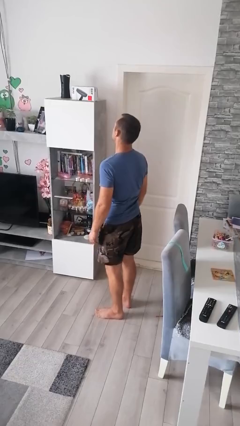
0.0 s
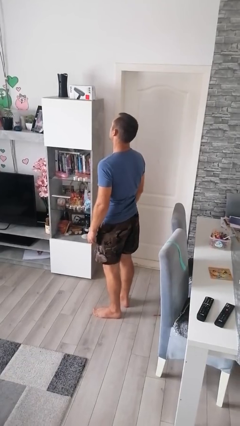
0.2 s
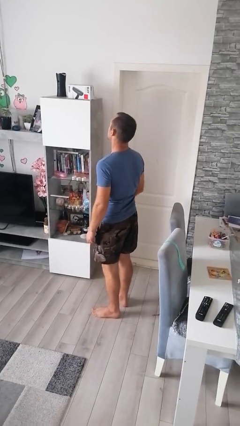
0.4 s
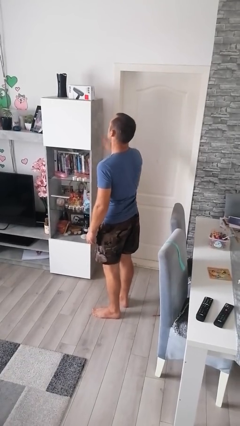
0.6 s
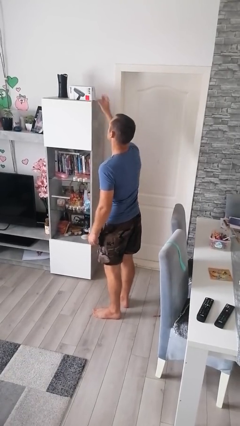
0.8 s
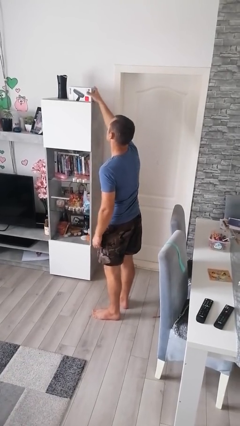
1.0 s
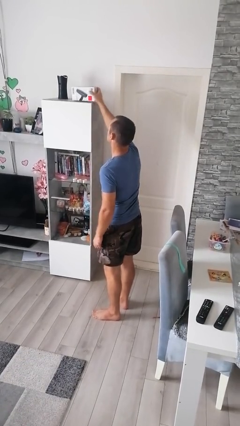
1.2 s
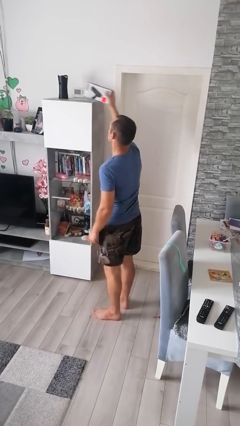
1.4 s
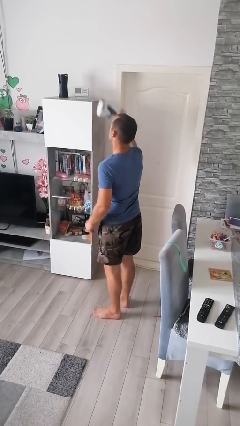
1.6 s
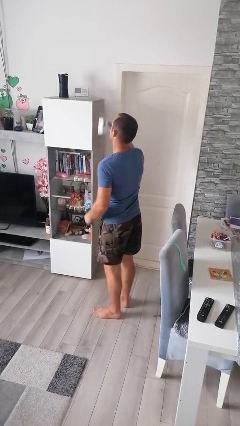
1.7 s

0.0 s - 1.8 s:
person puts down object on shelf

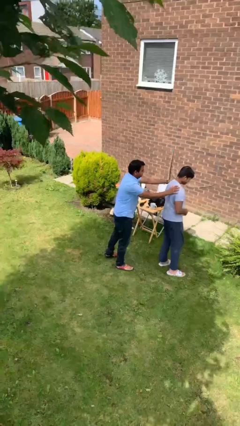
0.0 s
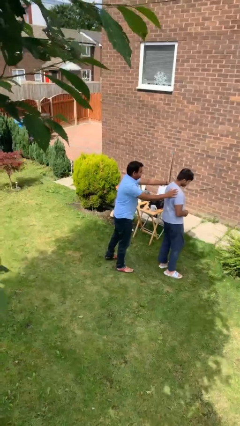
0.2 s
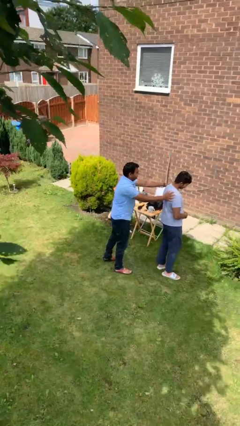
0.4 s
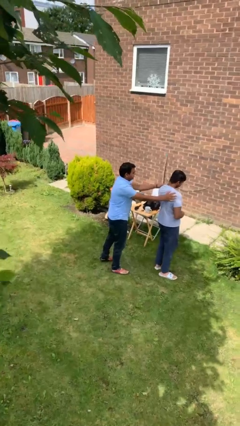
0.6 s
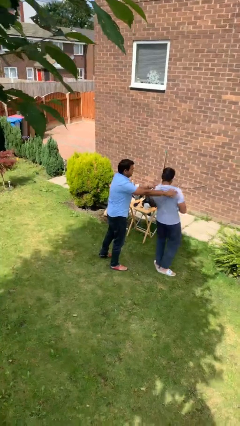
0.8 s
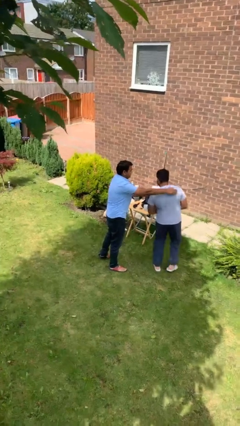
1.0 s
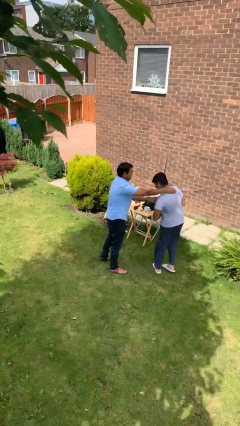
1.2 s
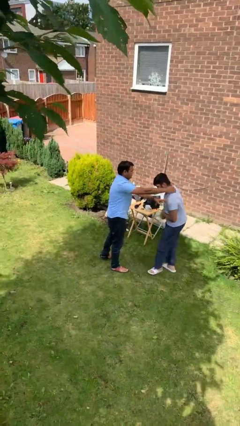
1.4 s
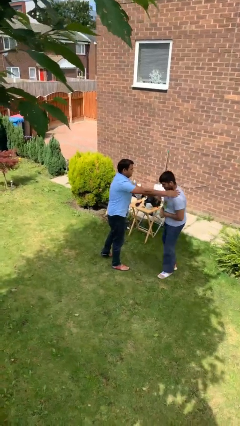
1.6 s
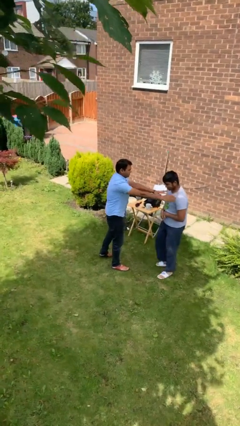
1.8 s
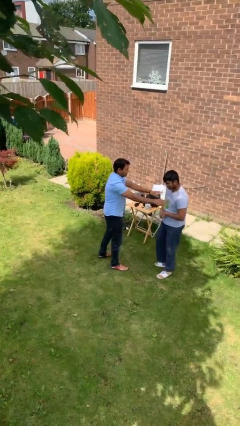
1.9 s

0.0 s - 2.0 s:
person spins person around

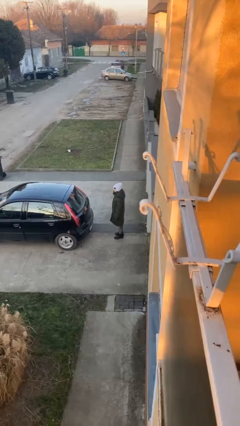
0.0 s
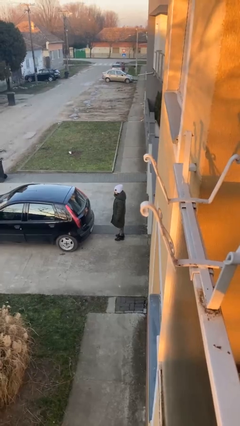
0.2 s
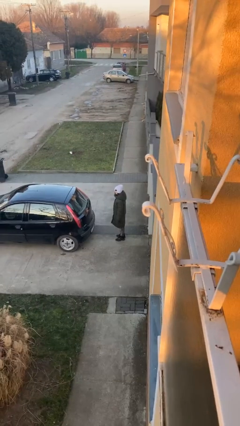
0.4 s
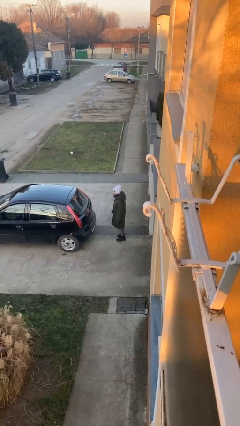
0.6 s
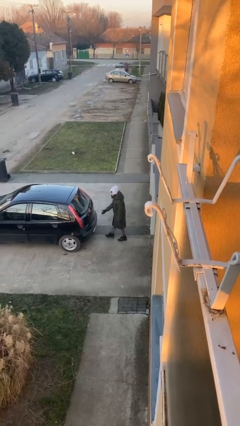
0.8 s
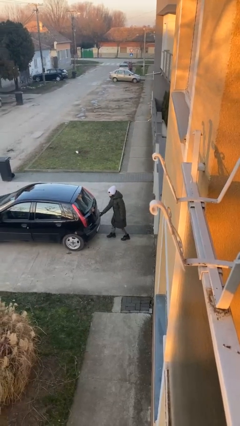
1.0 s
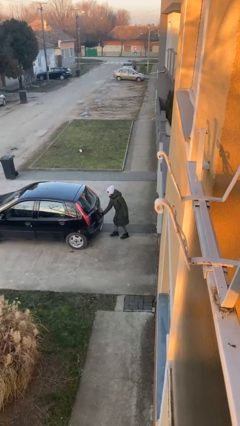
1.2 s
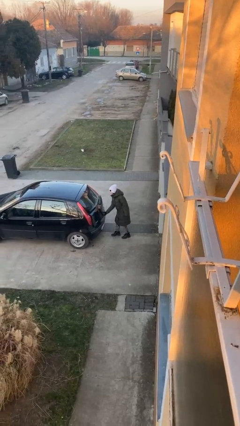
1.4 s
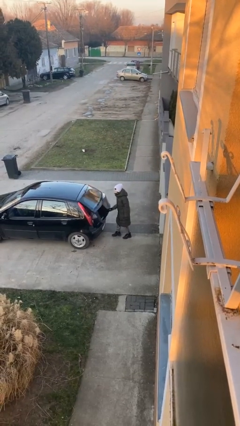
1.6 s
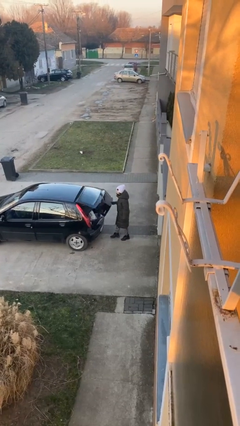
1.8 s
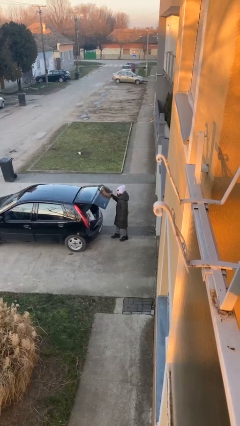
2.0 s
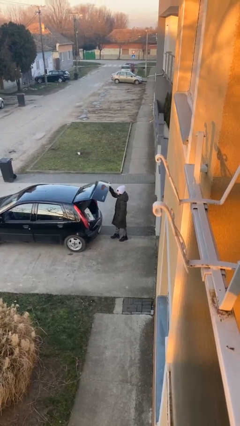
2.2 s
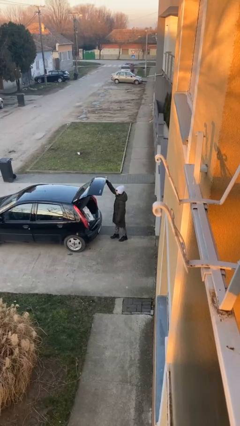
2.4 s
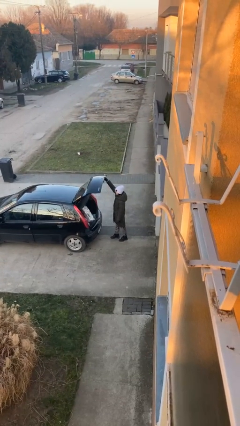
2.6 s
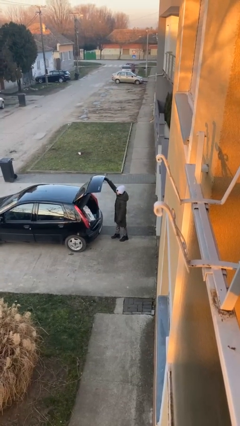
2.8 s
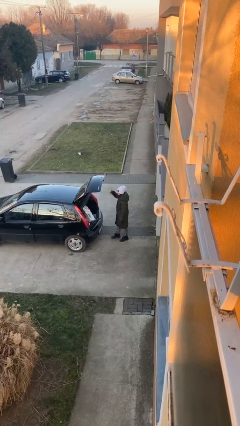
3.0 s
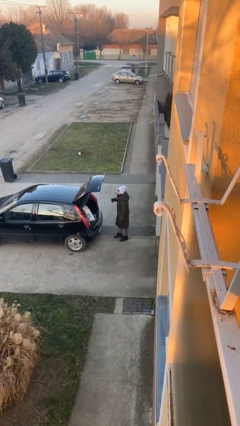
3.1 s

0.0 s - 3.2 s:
person opens car trunk

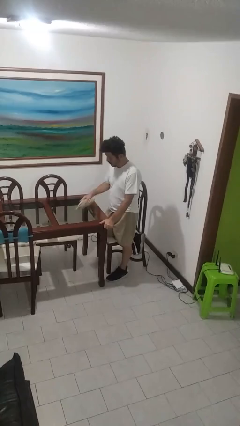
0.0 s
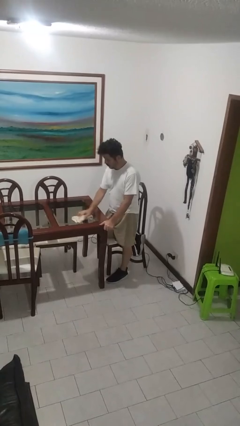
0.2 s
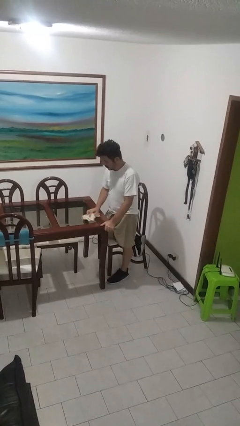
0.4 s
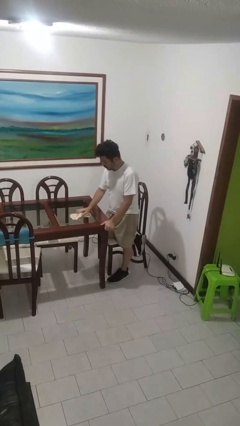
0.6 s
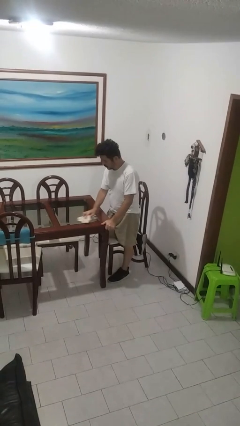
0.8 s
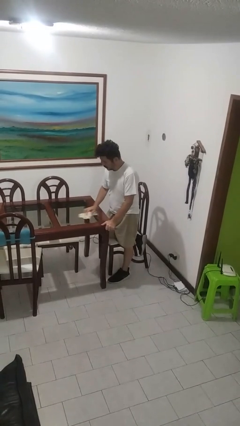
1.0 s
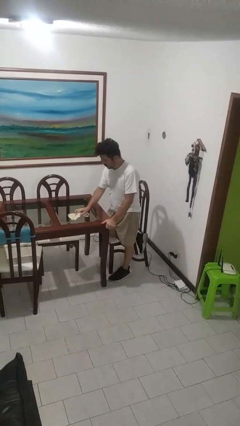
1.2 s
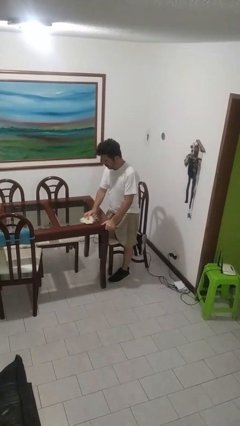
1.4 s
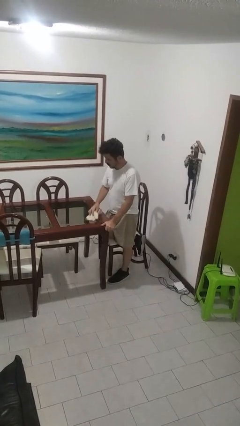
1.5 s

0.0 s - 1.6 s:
person cleans table with rag

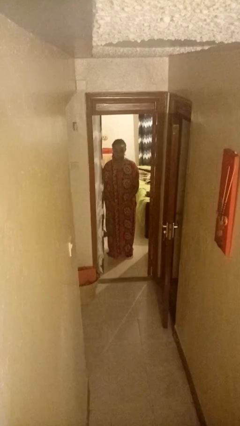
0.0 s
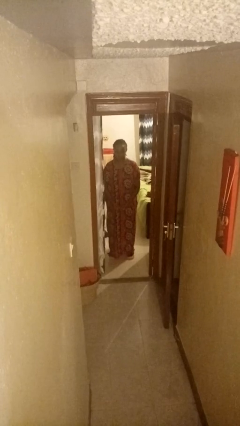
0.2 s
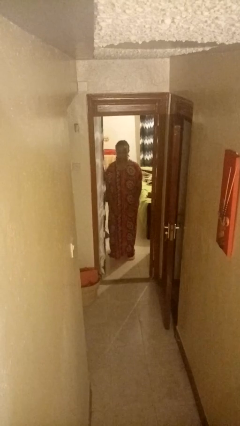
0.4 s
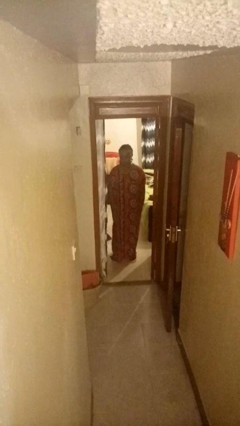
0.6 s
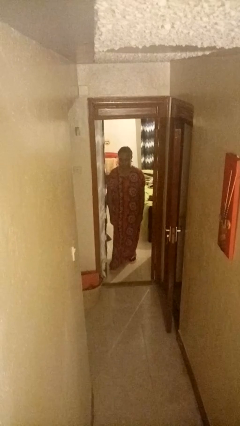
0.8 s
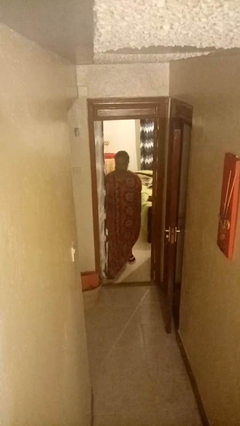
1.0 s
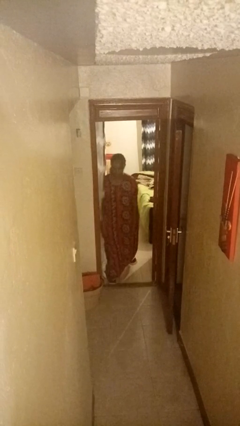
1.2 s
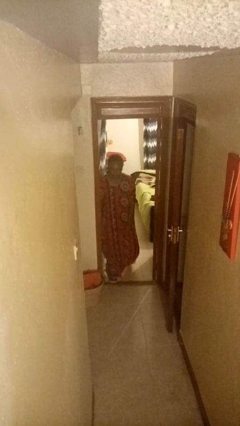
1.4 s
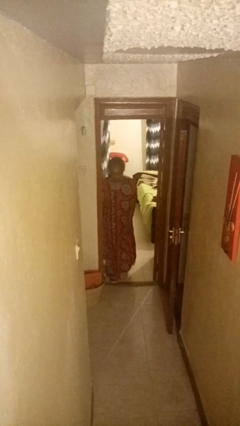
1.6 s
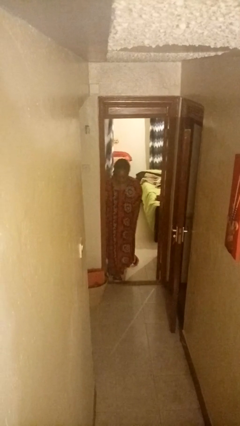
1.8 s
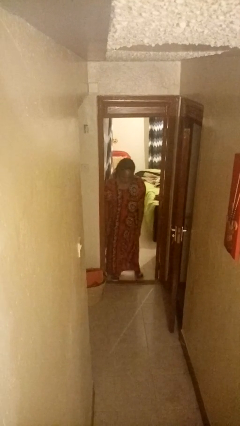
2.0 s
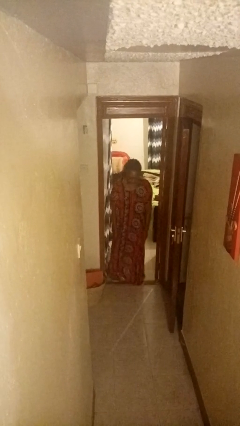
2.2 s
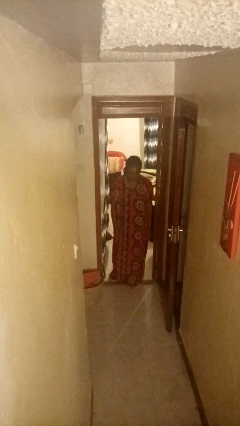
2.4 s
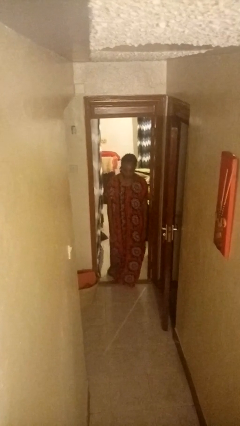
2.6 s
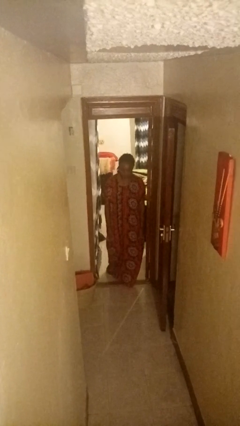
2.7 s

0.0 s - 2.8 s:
person bumps into wall

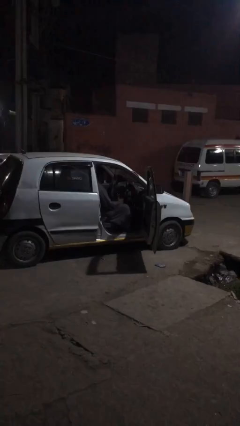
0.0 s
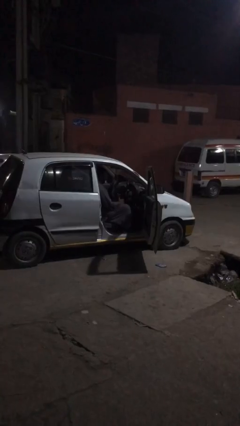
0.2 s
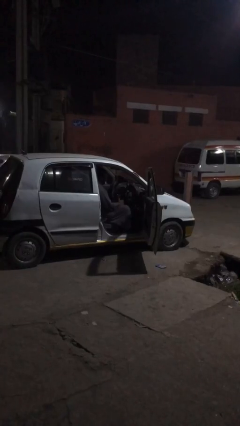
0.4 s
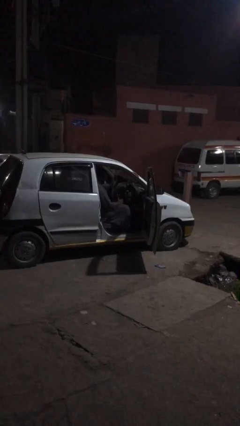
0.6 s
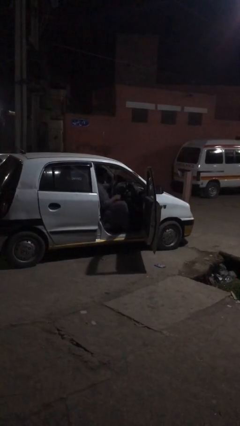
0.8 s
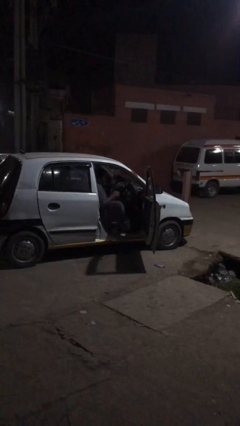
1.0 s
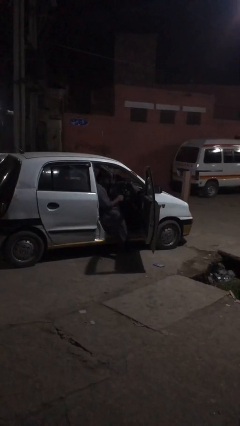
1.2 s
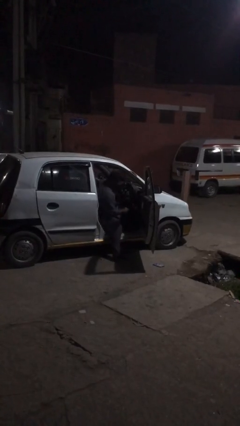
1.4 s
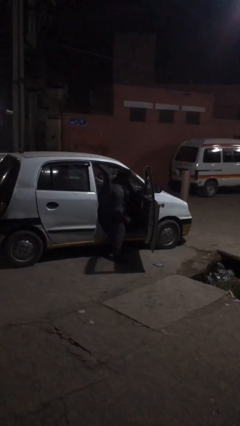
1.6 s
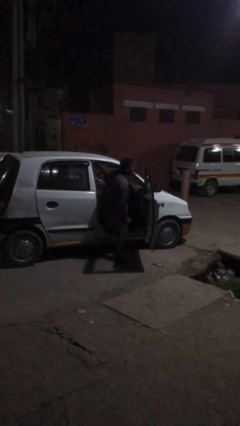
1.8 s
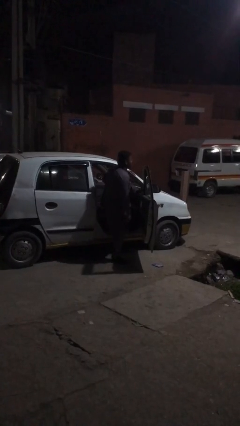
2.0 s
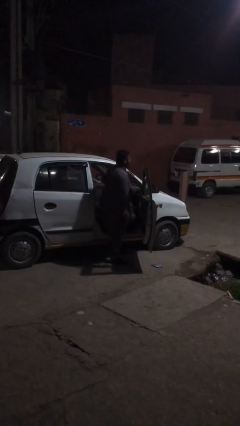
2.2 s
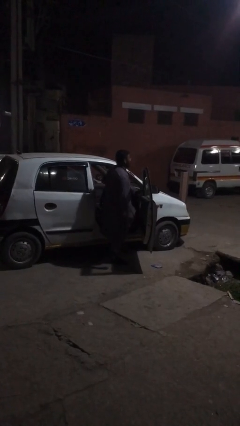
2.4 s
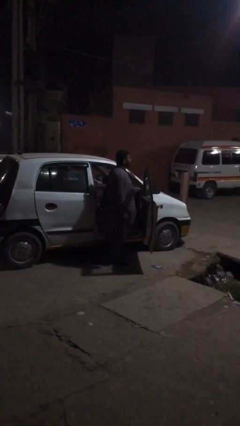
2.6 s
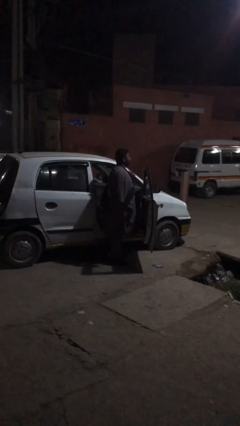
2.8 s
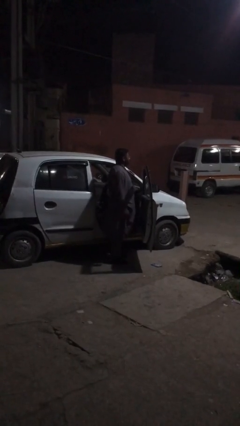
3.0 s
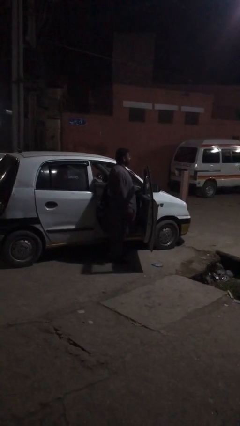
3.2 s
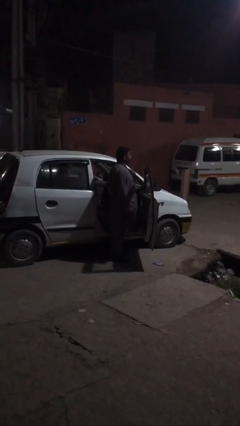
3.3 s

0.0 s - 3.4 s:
person exits car

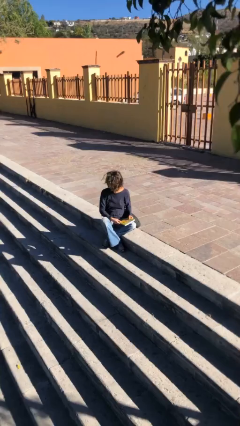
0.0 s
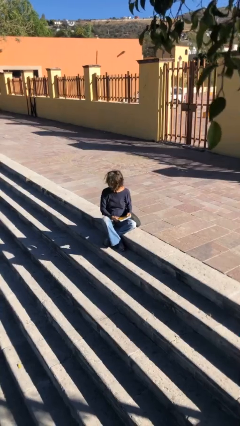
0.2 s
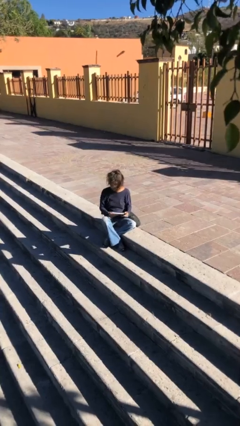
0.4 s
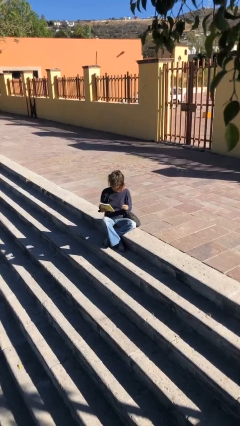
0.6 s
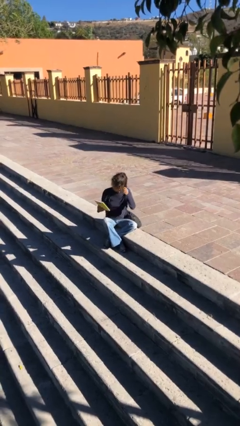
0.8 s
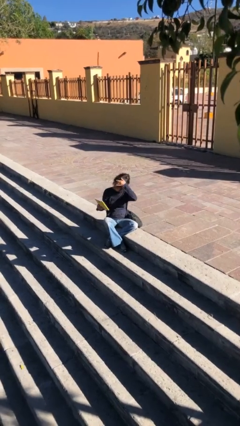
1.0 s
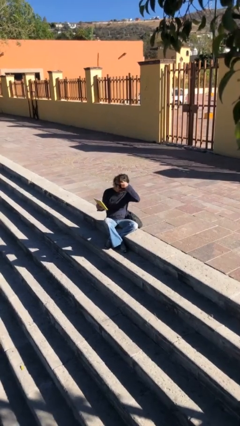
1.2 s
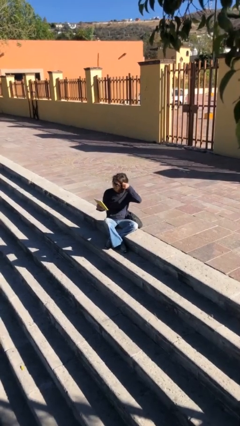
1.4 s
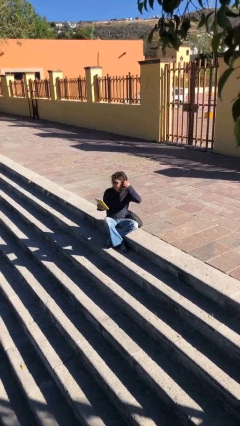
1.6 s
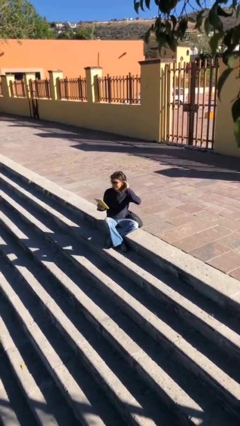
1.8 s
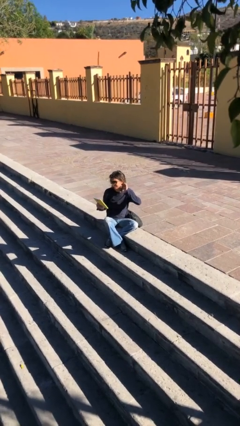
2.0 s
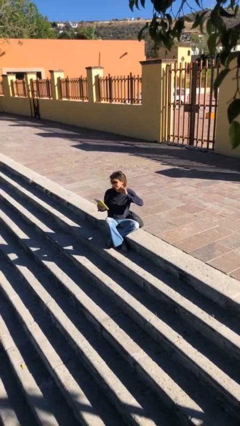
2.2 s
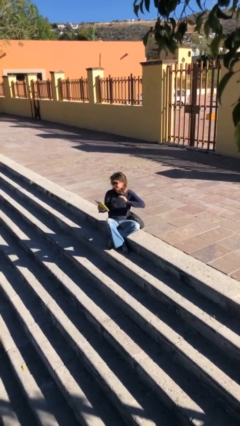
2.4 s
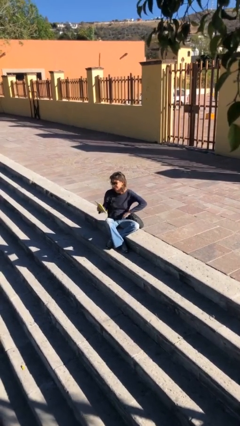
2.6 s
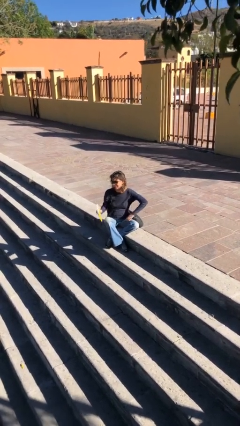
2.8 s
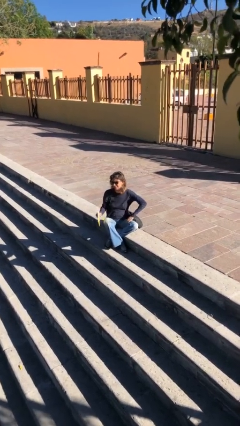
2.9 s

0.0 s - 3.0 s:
person reads document
